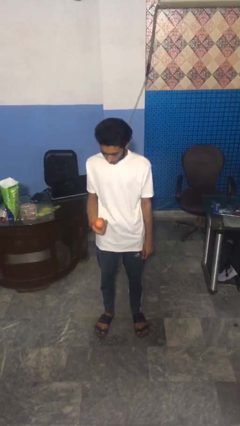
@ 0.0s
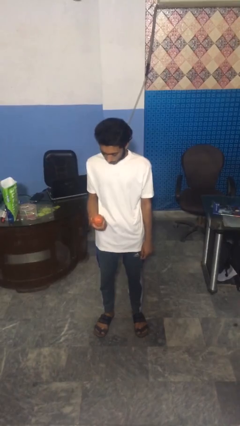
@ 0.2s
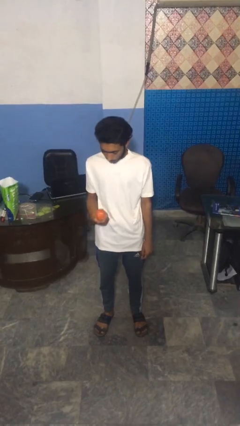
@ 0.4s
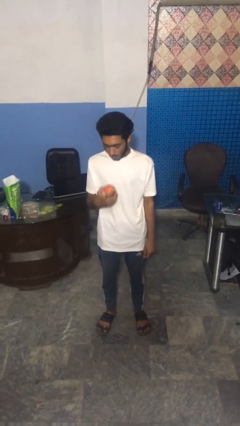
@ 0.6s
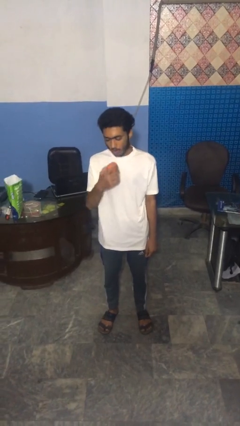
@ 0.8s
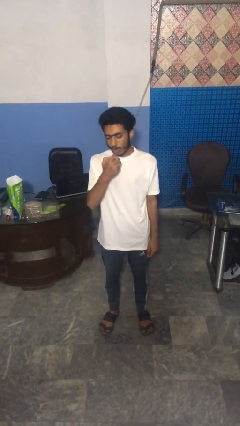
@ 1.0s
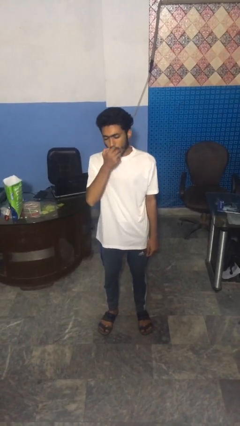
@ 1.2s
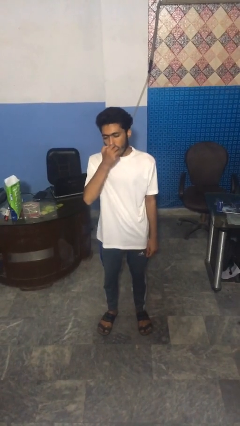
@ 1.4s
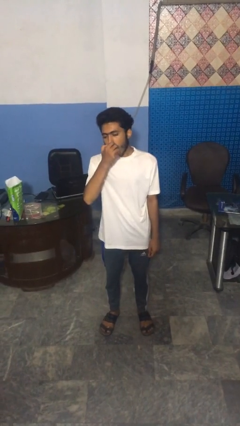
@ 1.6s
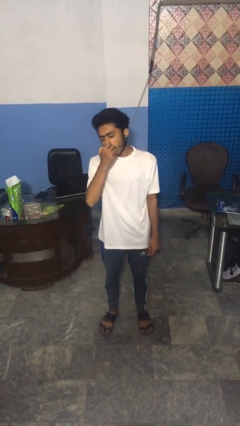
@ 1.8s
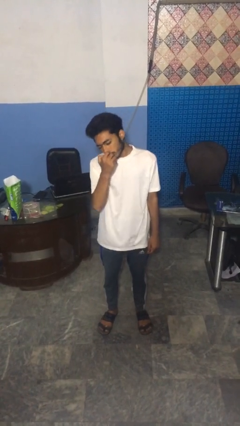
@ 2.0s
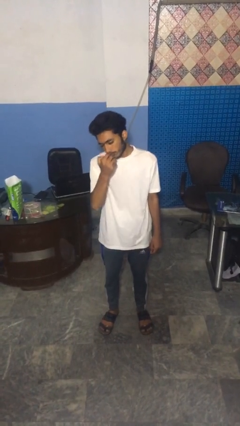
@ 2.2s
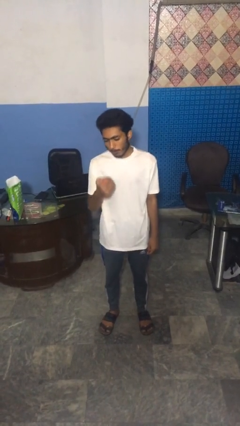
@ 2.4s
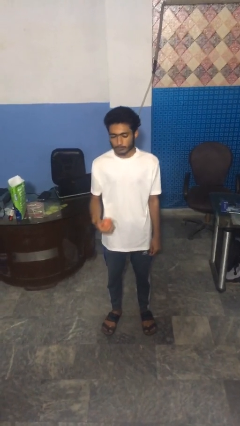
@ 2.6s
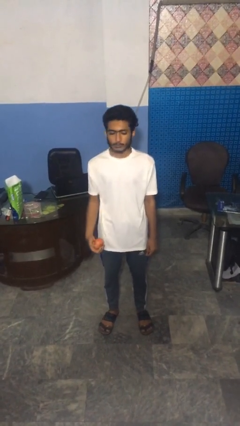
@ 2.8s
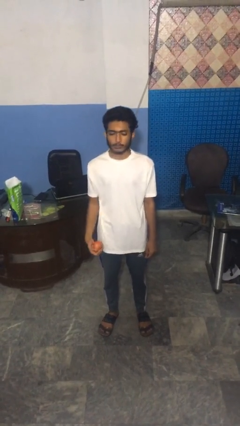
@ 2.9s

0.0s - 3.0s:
person eats apple

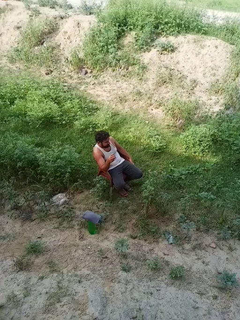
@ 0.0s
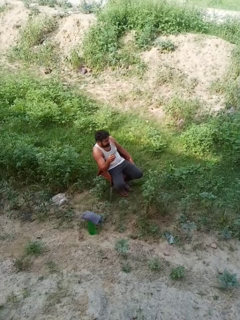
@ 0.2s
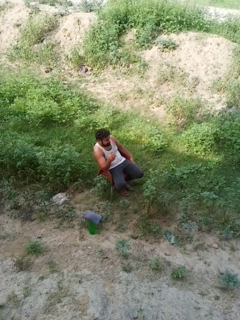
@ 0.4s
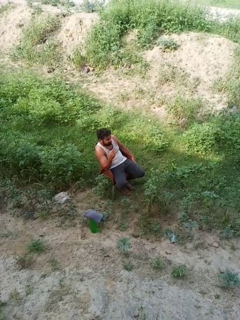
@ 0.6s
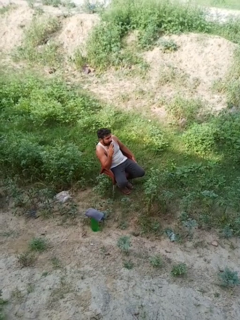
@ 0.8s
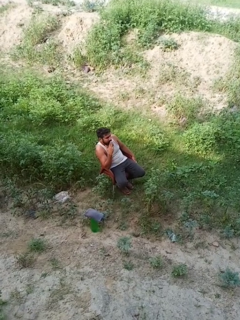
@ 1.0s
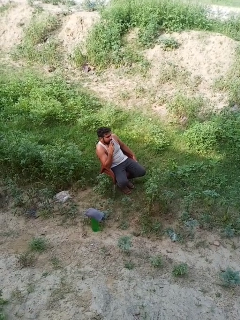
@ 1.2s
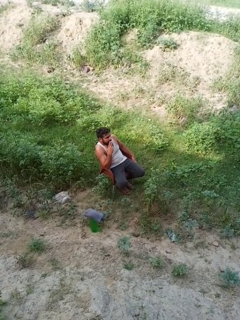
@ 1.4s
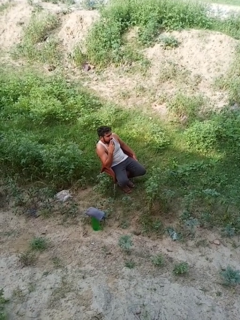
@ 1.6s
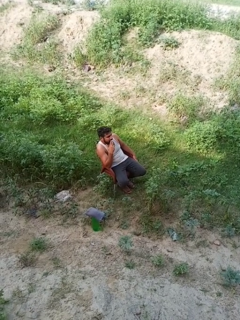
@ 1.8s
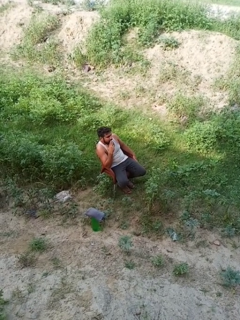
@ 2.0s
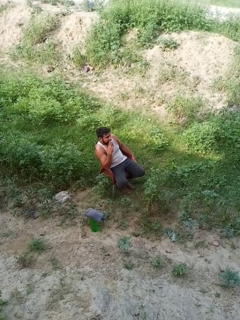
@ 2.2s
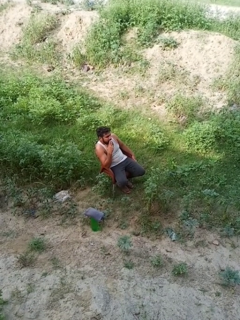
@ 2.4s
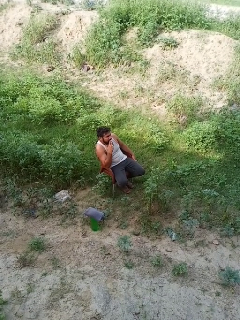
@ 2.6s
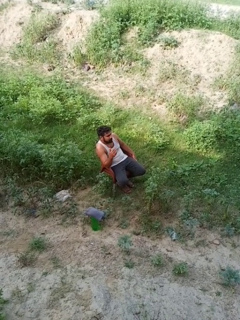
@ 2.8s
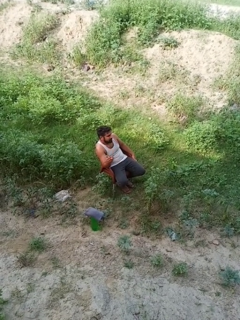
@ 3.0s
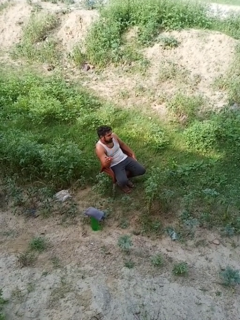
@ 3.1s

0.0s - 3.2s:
person vapes
